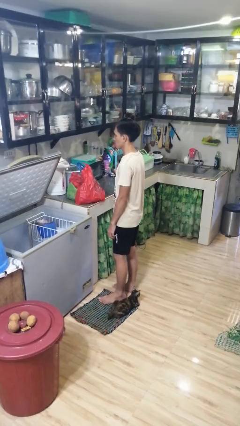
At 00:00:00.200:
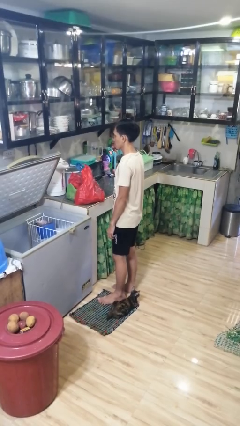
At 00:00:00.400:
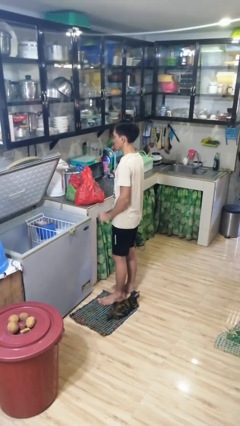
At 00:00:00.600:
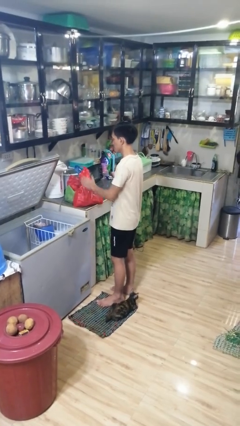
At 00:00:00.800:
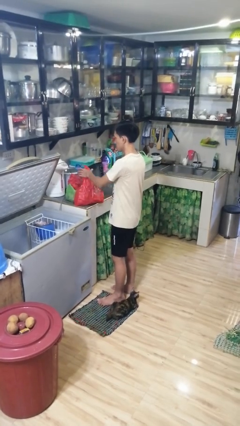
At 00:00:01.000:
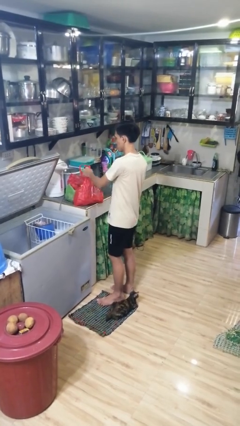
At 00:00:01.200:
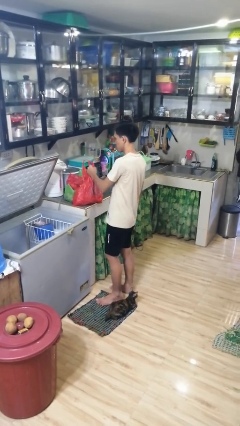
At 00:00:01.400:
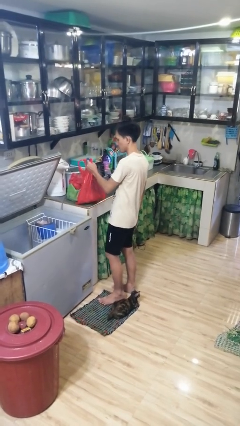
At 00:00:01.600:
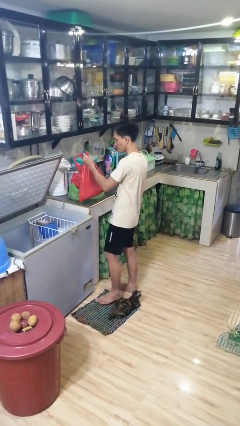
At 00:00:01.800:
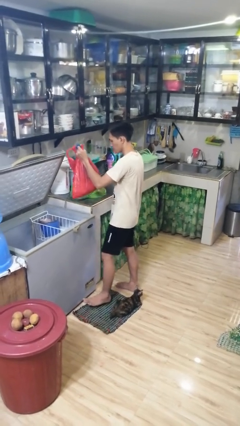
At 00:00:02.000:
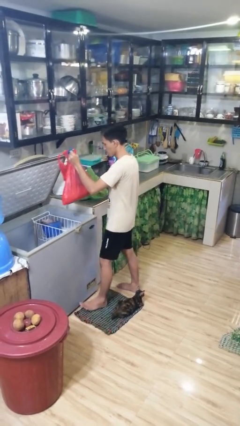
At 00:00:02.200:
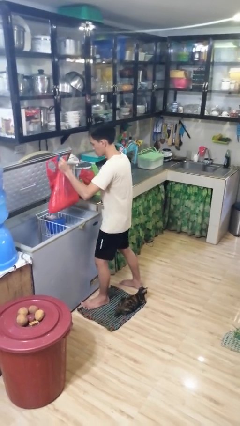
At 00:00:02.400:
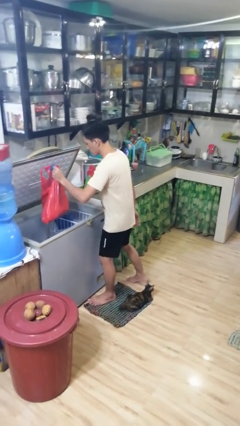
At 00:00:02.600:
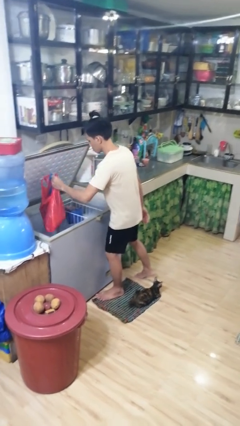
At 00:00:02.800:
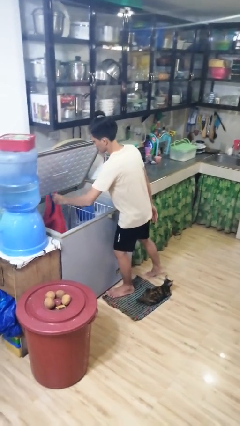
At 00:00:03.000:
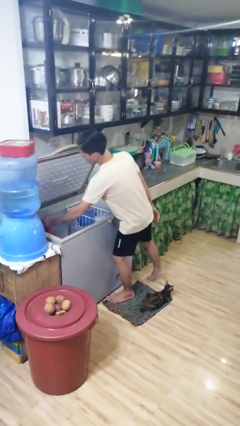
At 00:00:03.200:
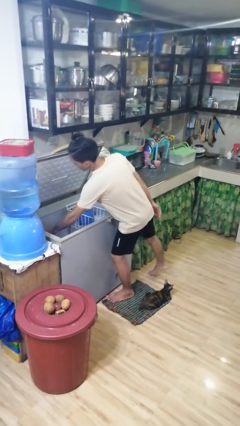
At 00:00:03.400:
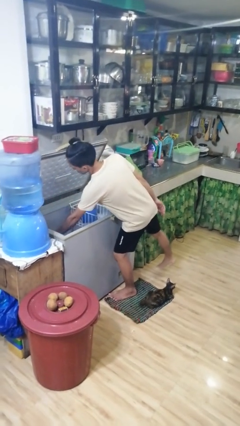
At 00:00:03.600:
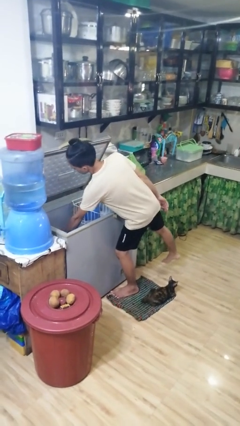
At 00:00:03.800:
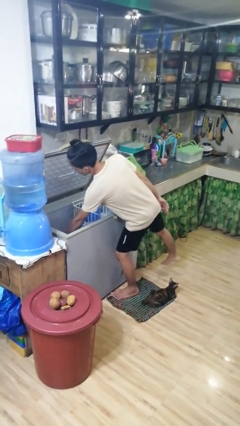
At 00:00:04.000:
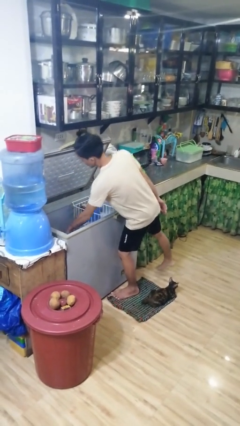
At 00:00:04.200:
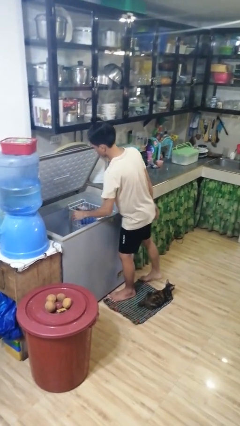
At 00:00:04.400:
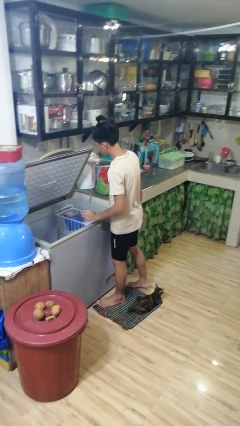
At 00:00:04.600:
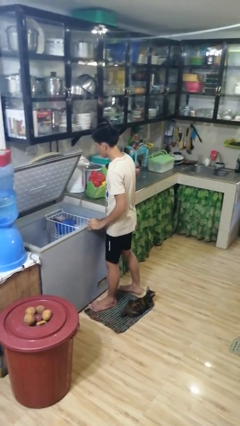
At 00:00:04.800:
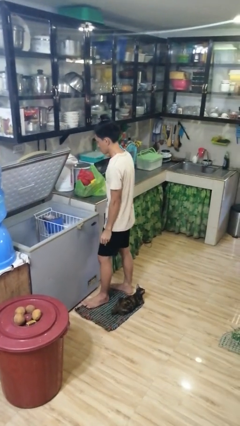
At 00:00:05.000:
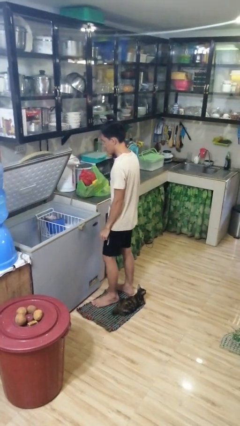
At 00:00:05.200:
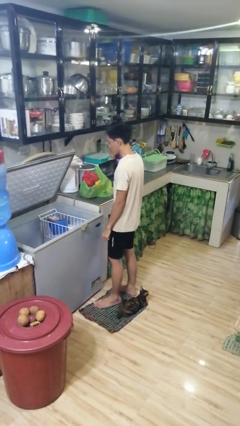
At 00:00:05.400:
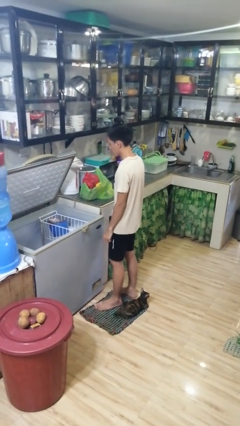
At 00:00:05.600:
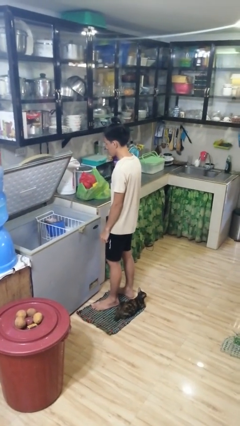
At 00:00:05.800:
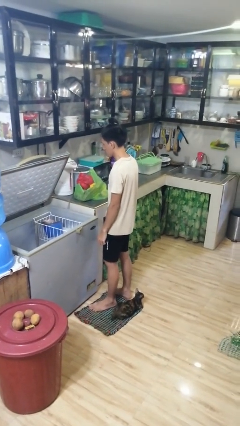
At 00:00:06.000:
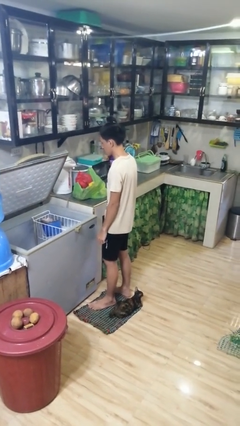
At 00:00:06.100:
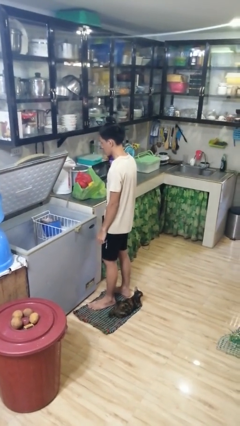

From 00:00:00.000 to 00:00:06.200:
person loads groceries into refrigerator

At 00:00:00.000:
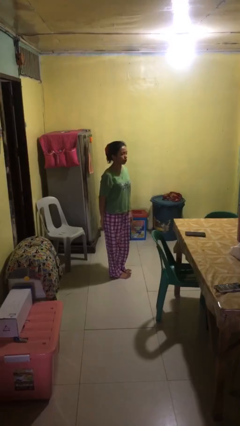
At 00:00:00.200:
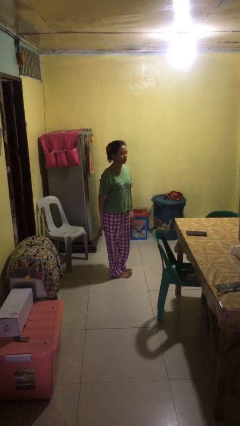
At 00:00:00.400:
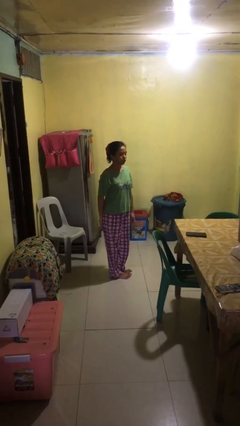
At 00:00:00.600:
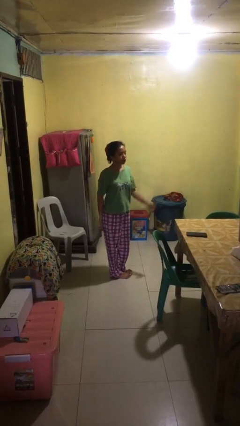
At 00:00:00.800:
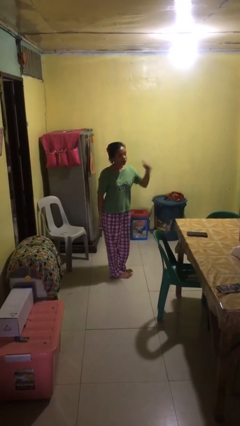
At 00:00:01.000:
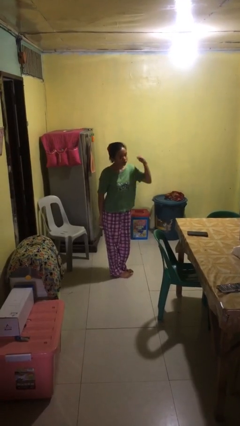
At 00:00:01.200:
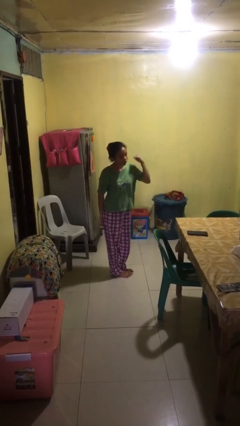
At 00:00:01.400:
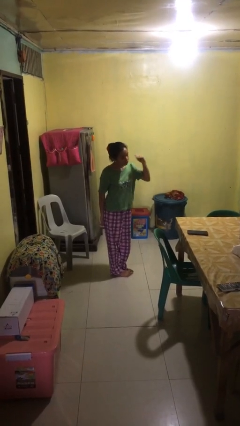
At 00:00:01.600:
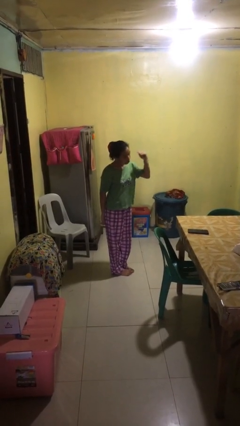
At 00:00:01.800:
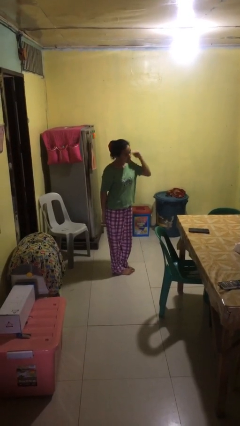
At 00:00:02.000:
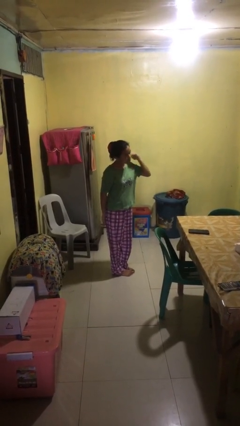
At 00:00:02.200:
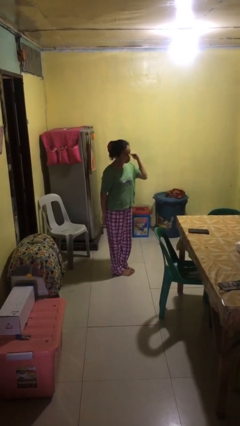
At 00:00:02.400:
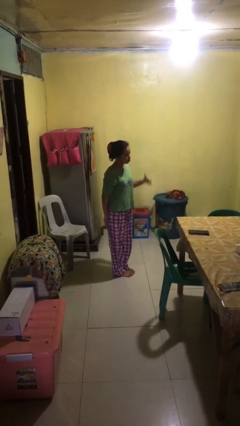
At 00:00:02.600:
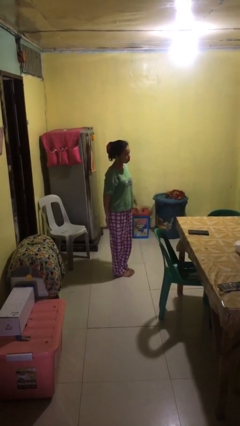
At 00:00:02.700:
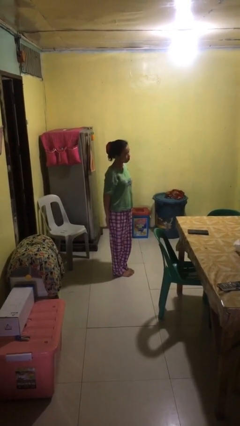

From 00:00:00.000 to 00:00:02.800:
person gestures behind me

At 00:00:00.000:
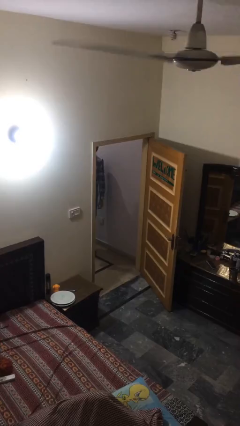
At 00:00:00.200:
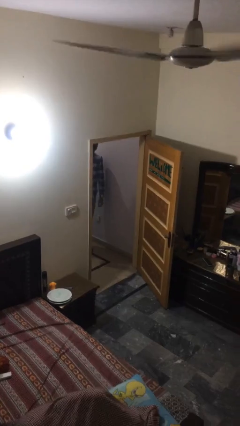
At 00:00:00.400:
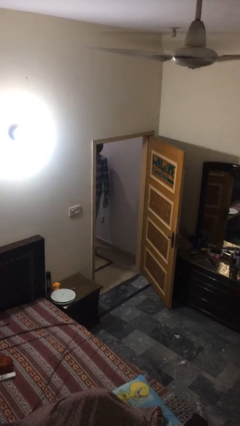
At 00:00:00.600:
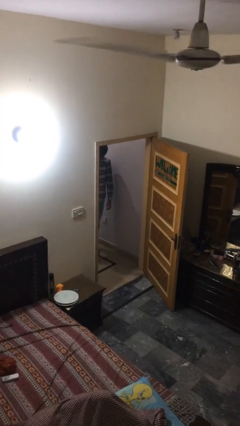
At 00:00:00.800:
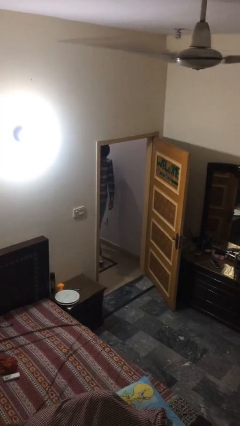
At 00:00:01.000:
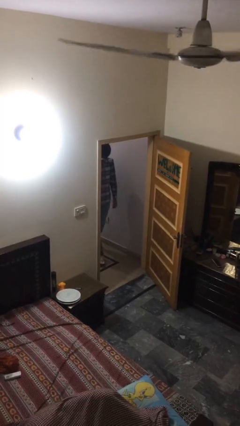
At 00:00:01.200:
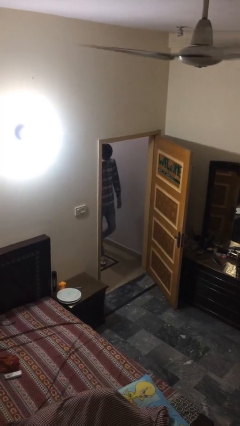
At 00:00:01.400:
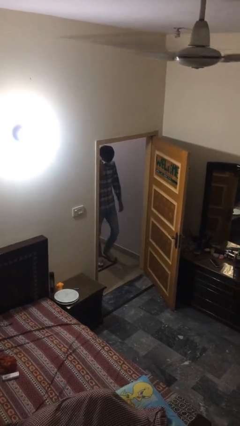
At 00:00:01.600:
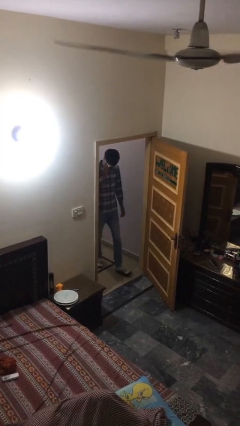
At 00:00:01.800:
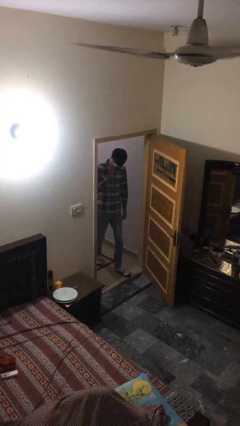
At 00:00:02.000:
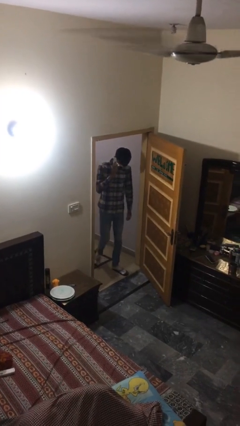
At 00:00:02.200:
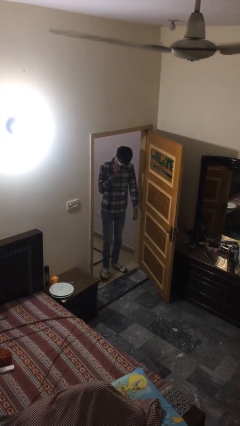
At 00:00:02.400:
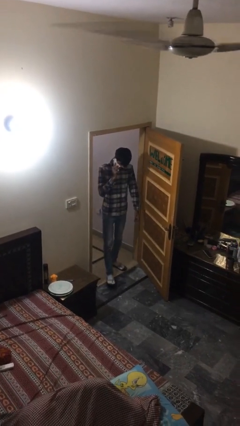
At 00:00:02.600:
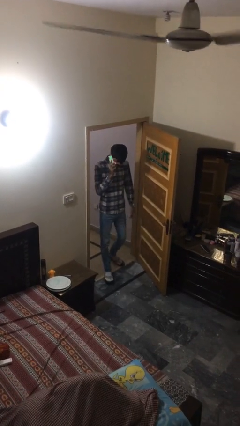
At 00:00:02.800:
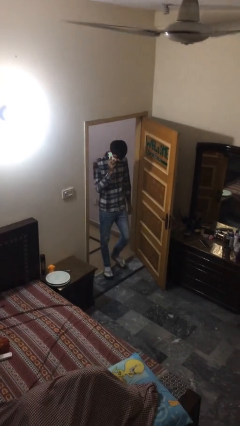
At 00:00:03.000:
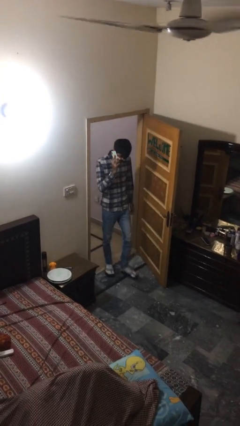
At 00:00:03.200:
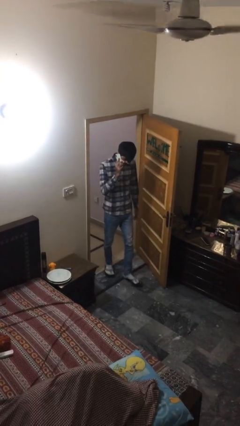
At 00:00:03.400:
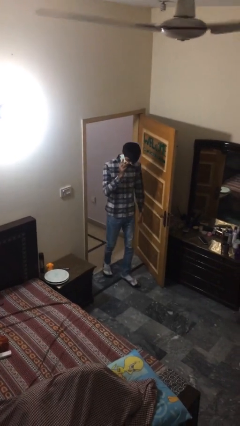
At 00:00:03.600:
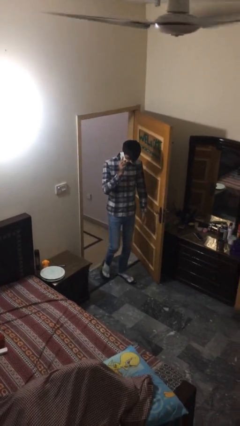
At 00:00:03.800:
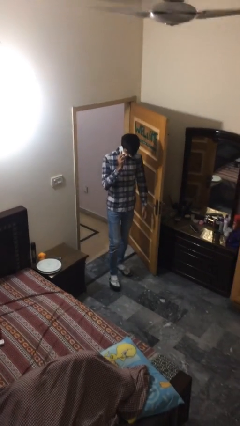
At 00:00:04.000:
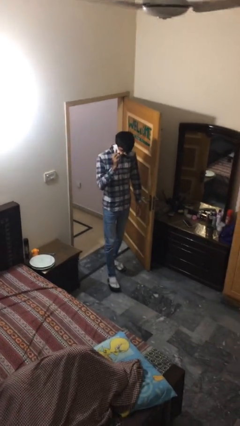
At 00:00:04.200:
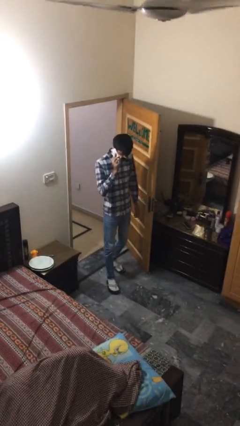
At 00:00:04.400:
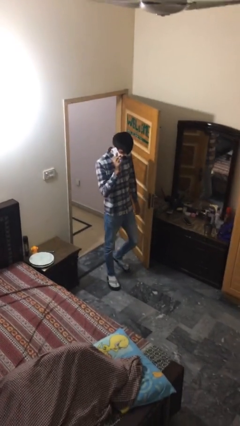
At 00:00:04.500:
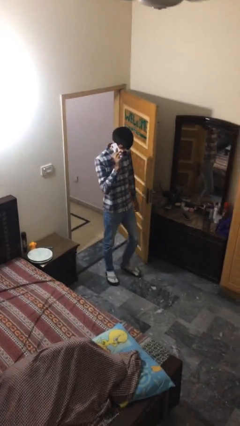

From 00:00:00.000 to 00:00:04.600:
person enters scene through structure

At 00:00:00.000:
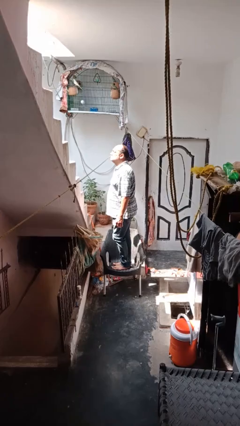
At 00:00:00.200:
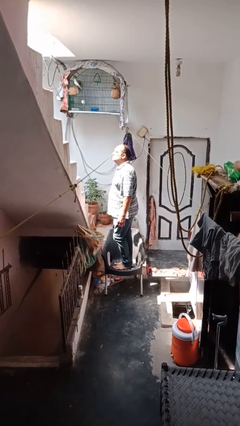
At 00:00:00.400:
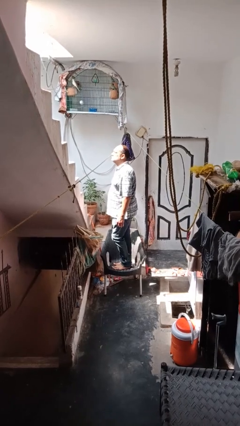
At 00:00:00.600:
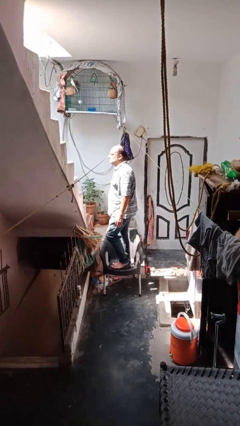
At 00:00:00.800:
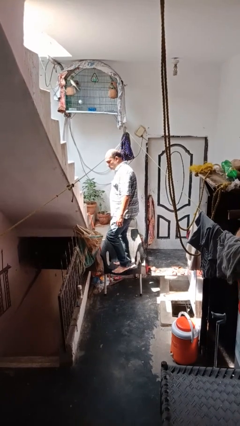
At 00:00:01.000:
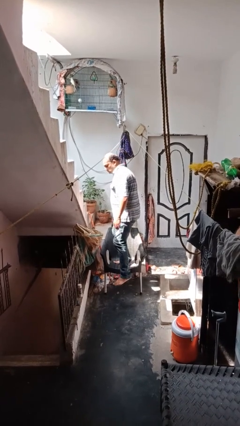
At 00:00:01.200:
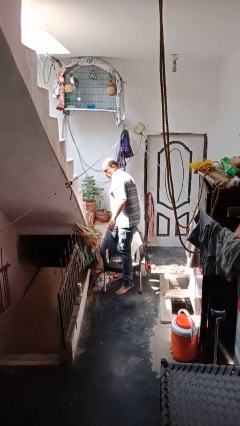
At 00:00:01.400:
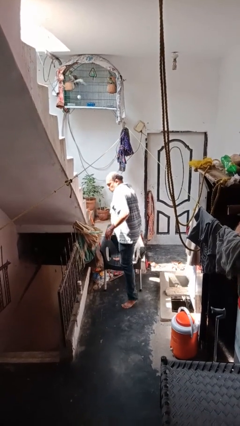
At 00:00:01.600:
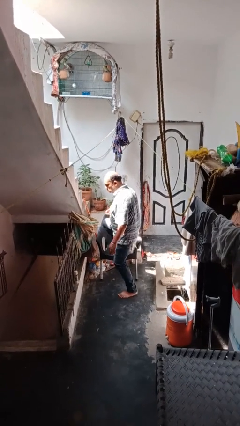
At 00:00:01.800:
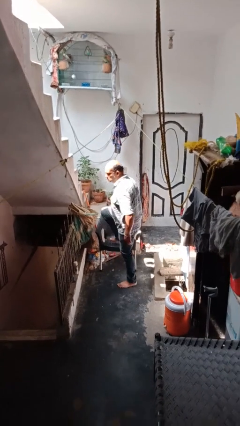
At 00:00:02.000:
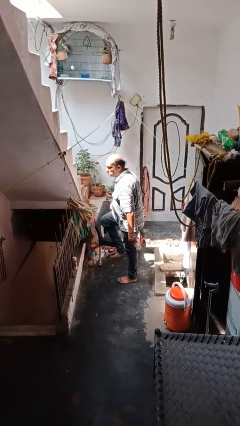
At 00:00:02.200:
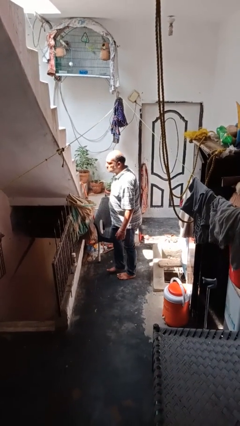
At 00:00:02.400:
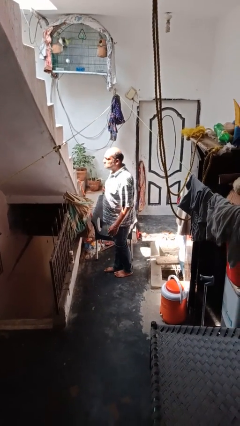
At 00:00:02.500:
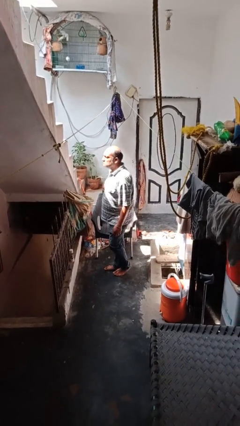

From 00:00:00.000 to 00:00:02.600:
person climbs off chair

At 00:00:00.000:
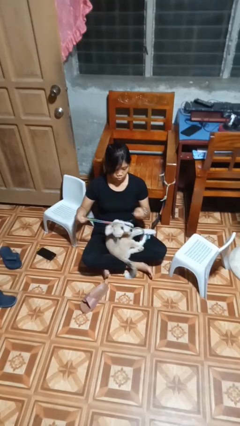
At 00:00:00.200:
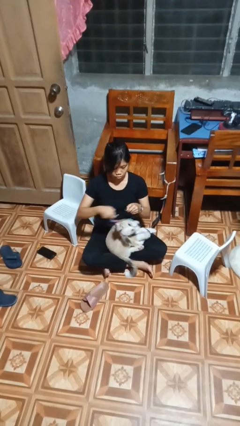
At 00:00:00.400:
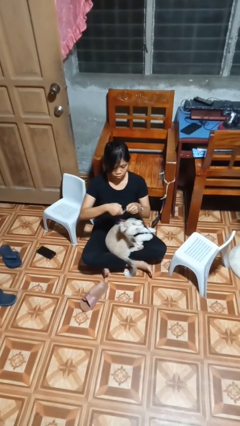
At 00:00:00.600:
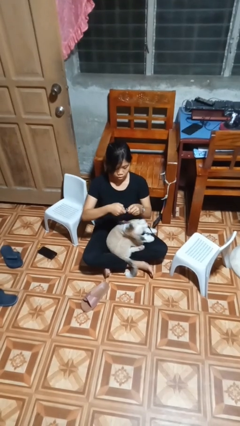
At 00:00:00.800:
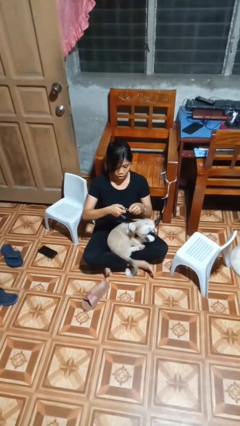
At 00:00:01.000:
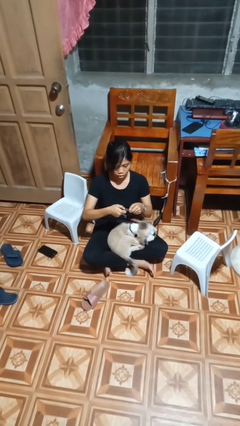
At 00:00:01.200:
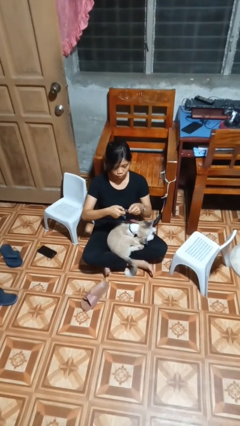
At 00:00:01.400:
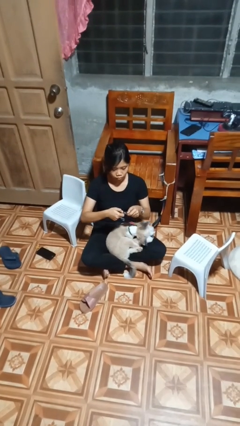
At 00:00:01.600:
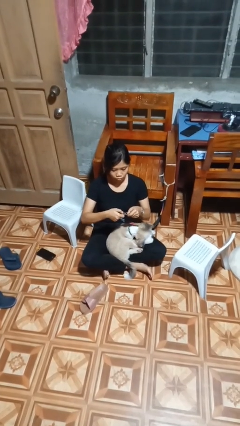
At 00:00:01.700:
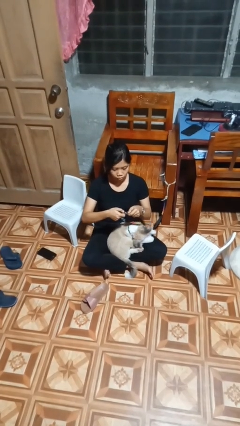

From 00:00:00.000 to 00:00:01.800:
person attaches leash to dog
